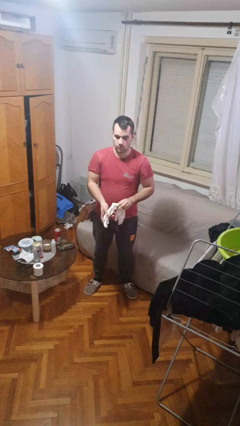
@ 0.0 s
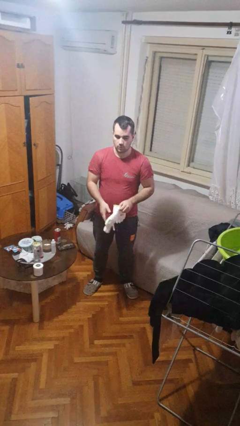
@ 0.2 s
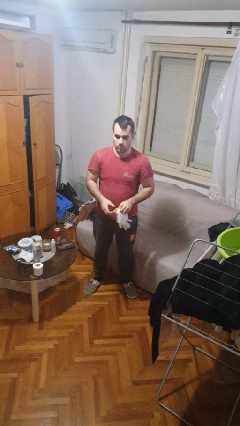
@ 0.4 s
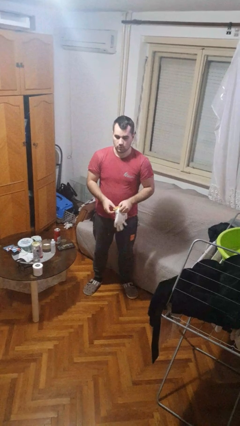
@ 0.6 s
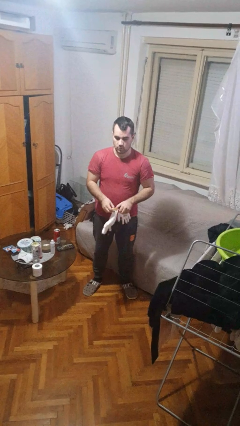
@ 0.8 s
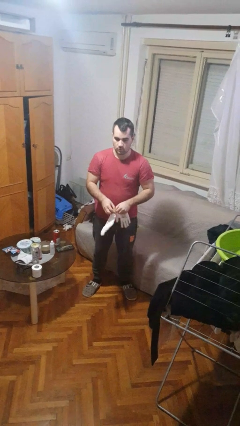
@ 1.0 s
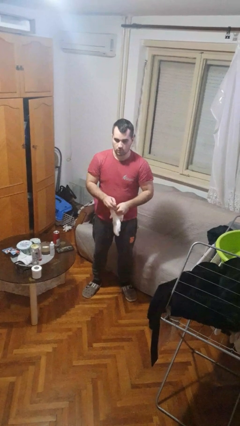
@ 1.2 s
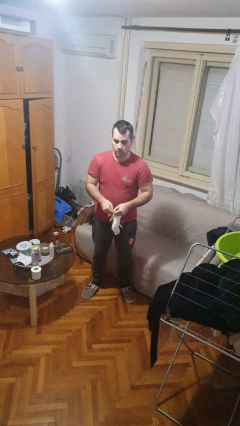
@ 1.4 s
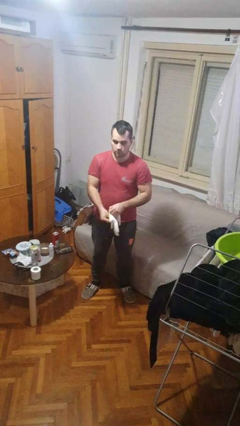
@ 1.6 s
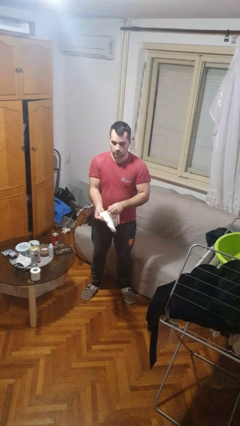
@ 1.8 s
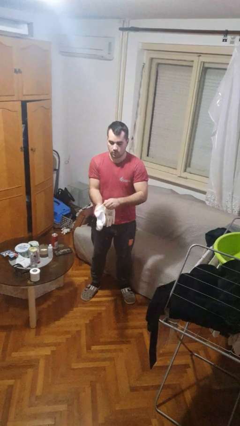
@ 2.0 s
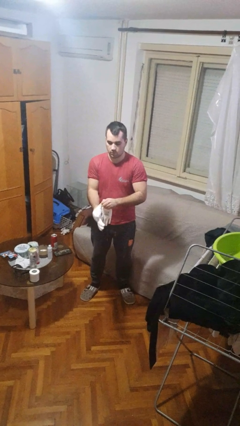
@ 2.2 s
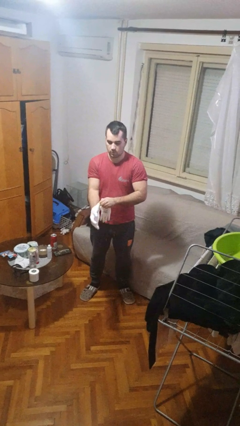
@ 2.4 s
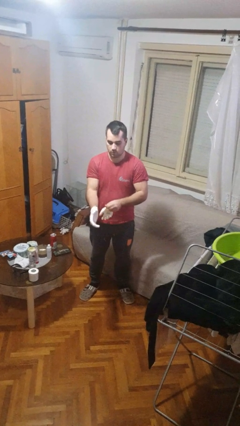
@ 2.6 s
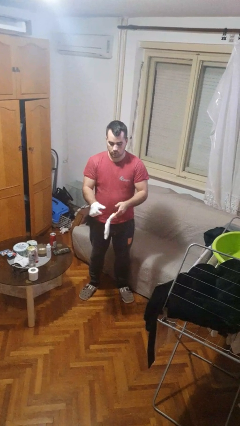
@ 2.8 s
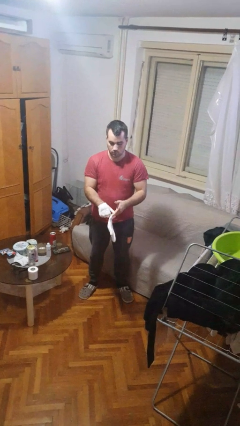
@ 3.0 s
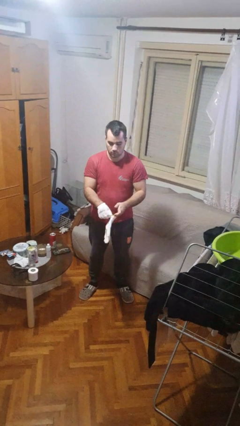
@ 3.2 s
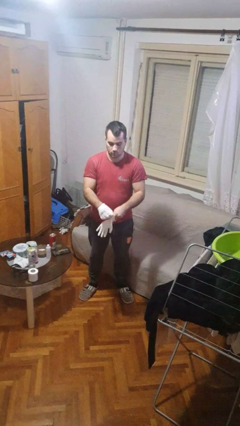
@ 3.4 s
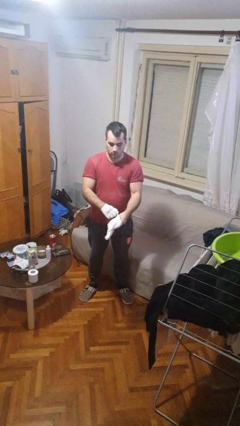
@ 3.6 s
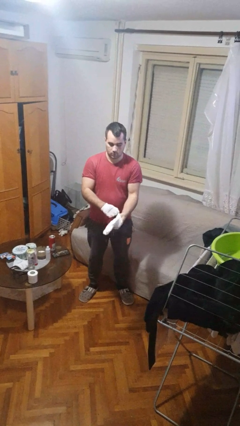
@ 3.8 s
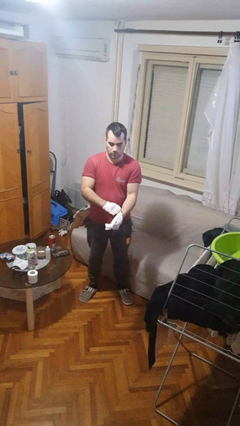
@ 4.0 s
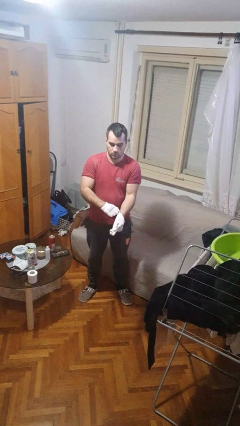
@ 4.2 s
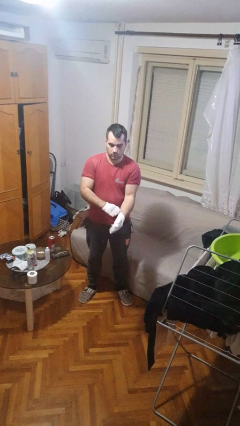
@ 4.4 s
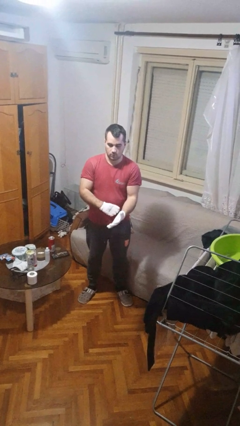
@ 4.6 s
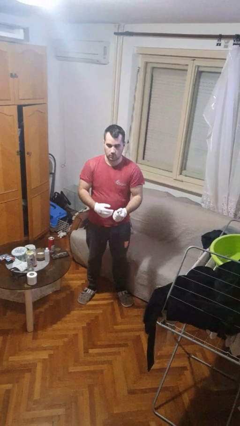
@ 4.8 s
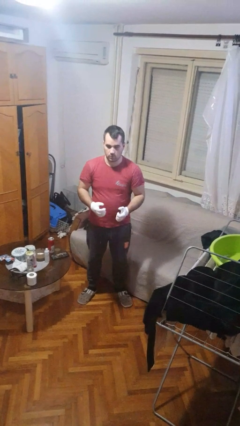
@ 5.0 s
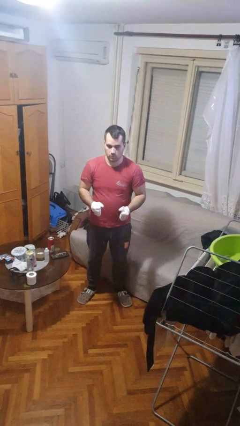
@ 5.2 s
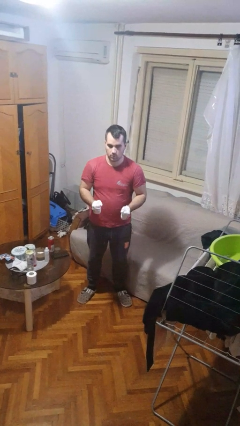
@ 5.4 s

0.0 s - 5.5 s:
person puts on gloves

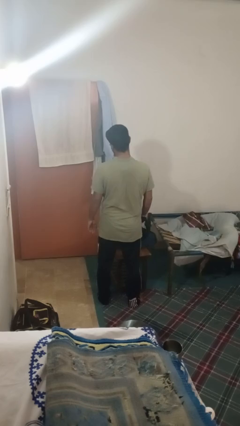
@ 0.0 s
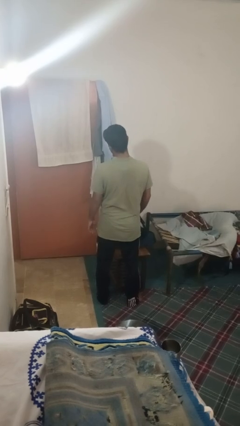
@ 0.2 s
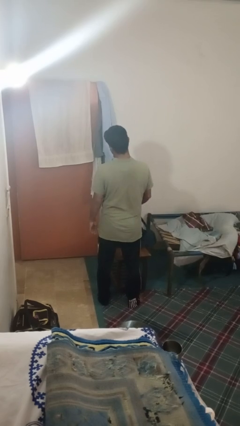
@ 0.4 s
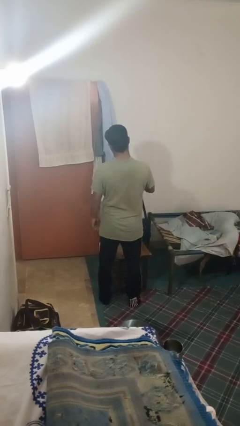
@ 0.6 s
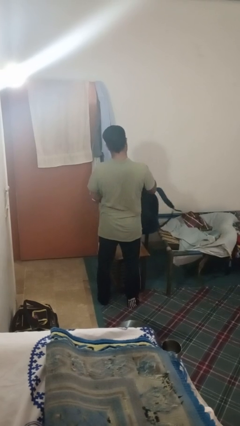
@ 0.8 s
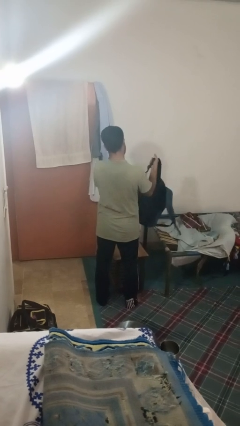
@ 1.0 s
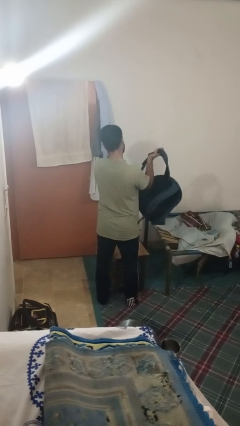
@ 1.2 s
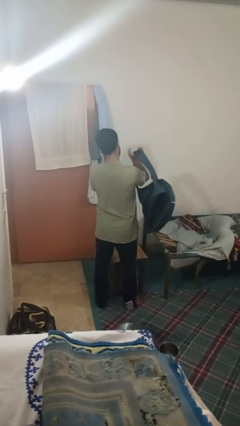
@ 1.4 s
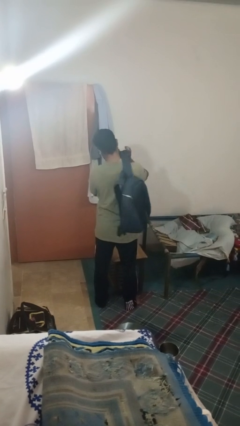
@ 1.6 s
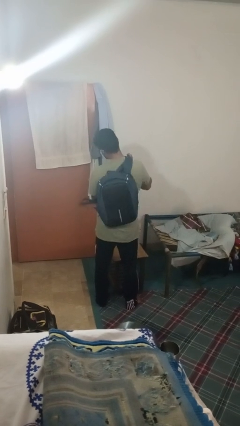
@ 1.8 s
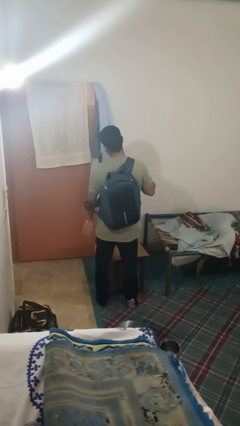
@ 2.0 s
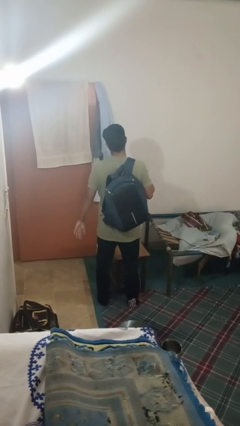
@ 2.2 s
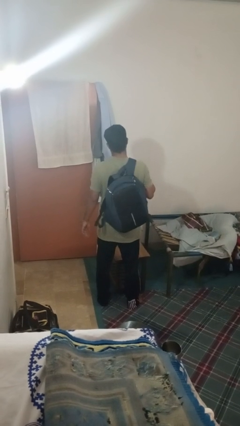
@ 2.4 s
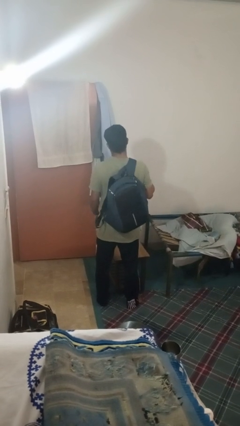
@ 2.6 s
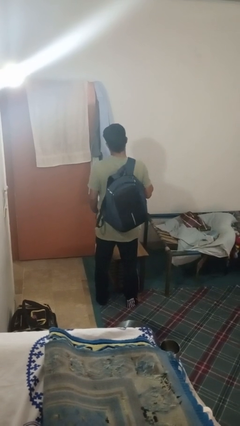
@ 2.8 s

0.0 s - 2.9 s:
person puts on backpack

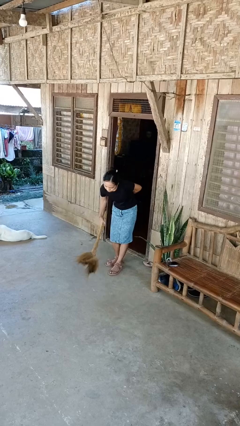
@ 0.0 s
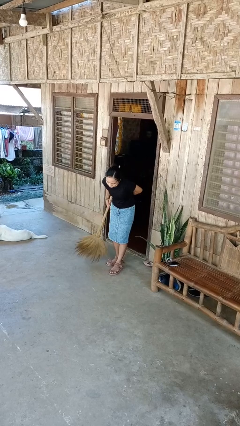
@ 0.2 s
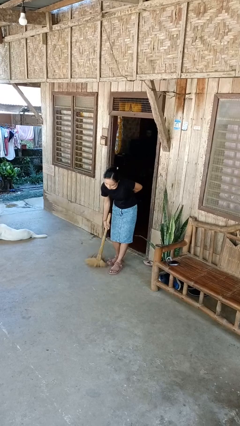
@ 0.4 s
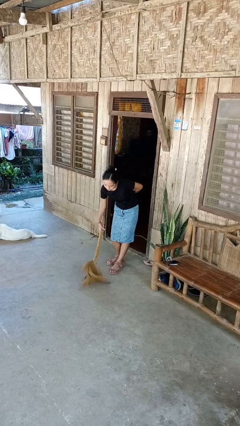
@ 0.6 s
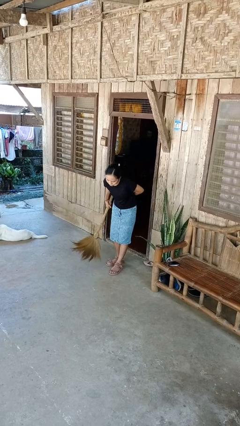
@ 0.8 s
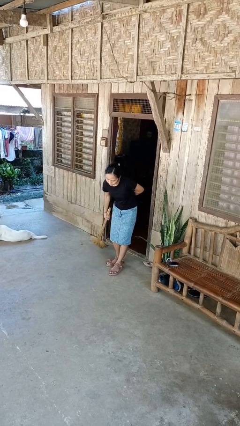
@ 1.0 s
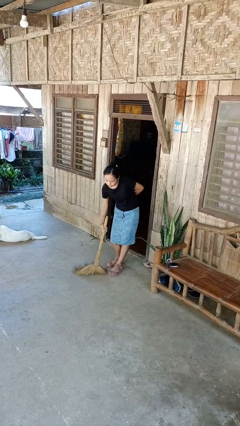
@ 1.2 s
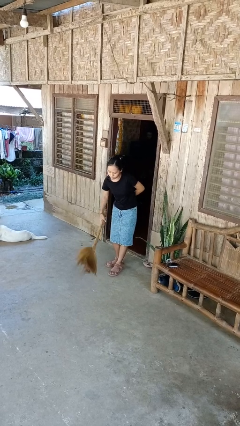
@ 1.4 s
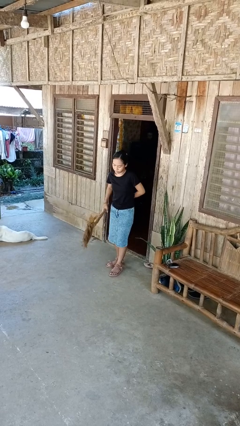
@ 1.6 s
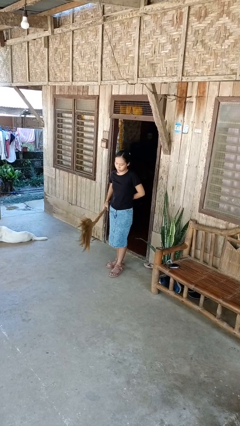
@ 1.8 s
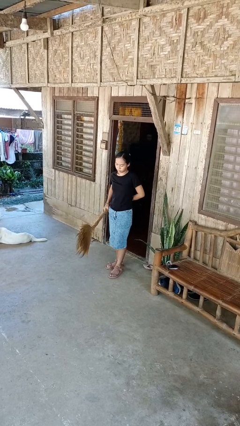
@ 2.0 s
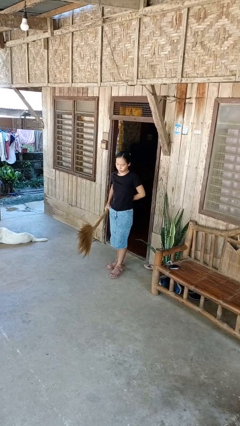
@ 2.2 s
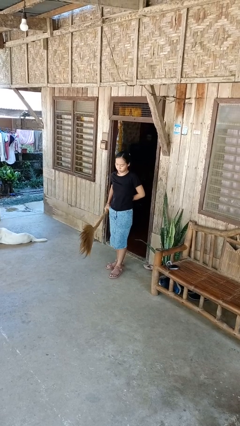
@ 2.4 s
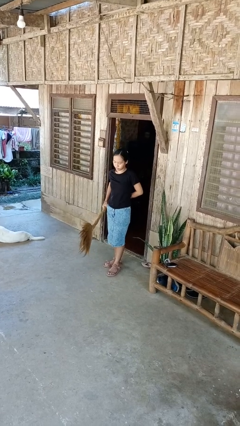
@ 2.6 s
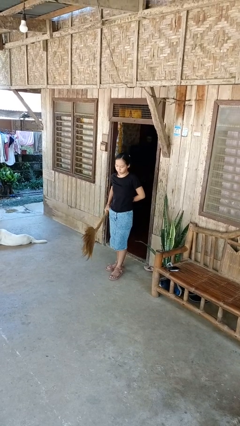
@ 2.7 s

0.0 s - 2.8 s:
person sweeps floor

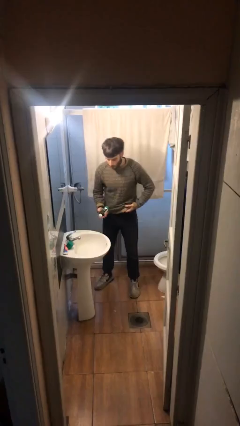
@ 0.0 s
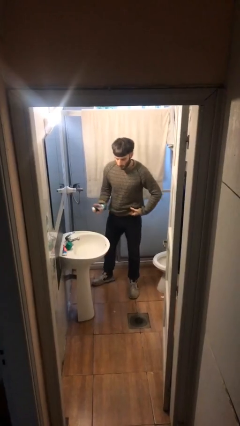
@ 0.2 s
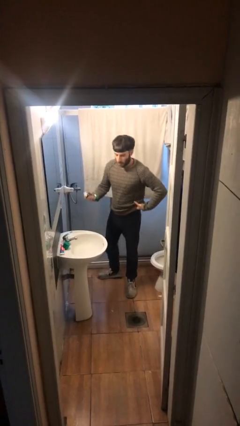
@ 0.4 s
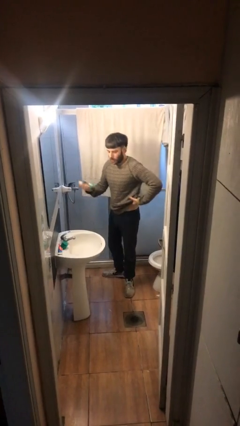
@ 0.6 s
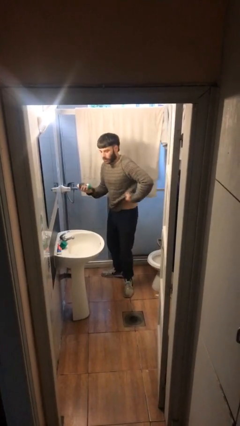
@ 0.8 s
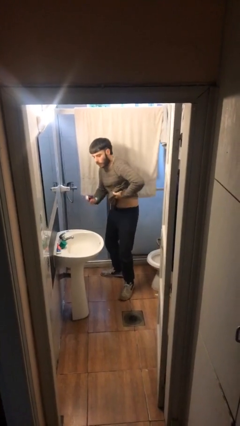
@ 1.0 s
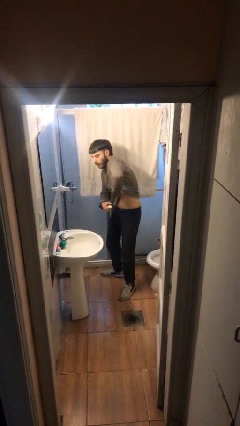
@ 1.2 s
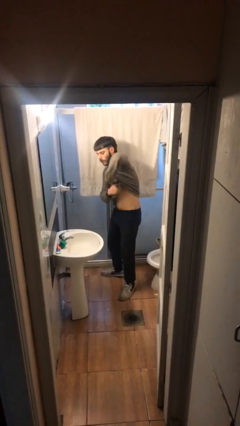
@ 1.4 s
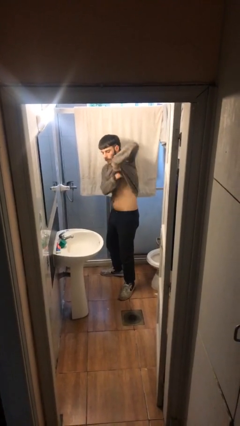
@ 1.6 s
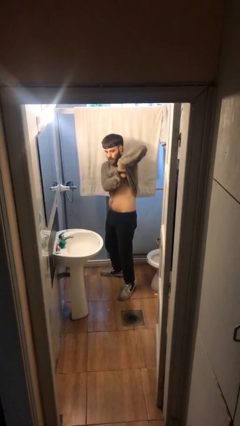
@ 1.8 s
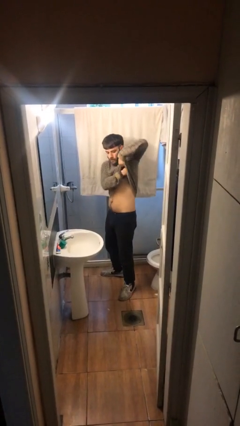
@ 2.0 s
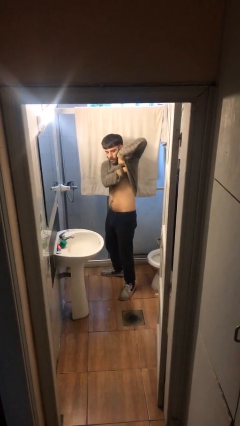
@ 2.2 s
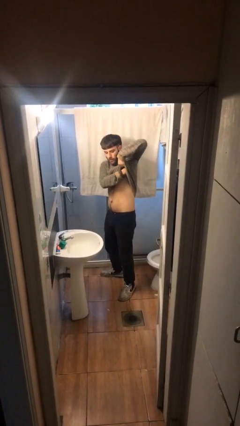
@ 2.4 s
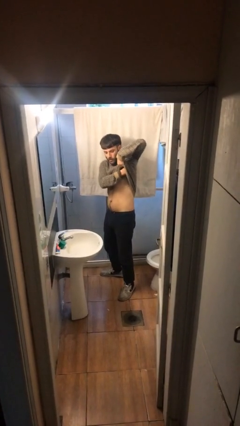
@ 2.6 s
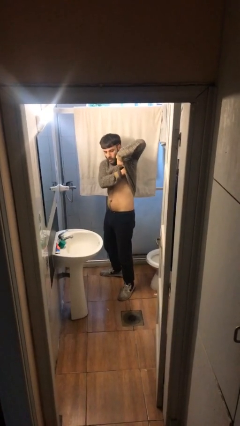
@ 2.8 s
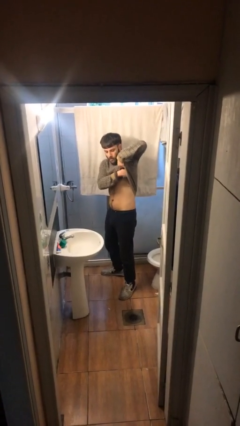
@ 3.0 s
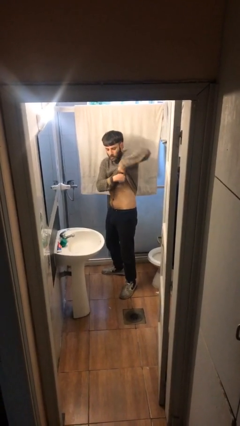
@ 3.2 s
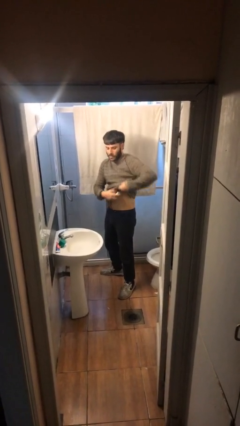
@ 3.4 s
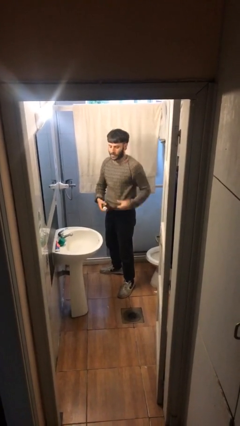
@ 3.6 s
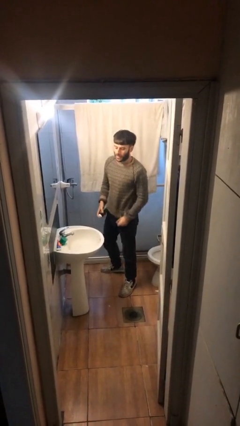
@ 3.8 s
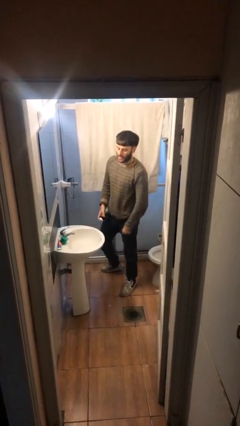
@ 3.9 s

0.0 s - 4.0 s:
person applies deodorant

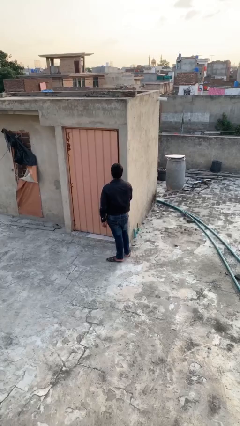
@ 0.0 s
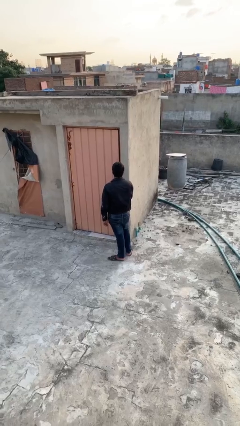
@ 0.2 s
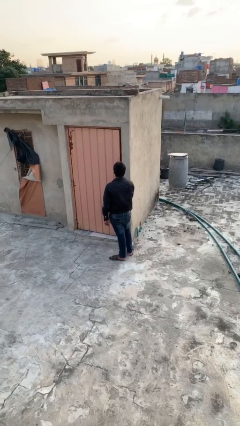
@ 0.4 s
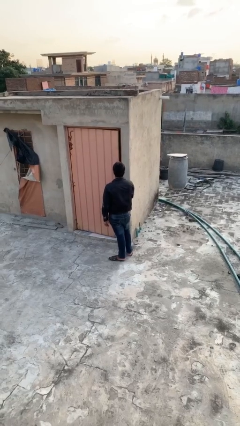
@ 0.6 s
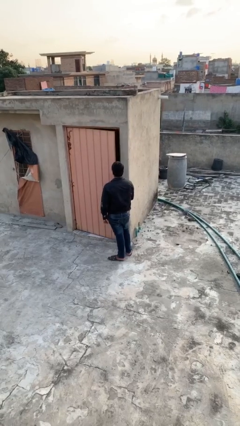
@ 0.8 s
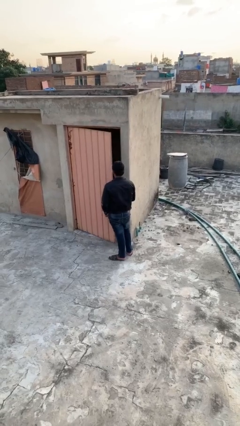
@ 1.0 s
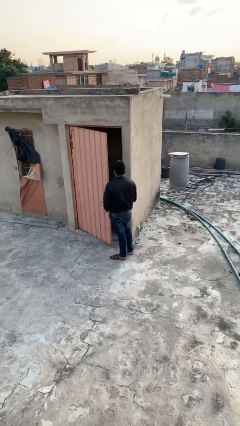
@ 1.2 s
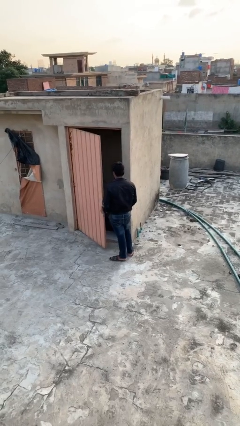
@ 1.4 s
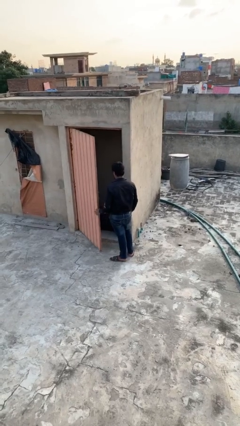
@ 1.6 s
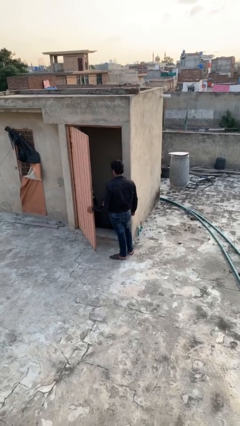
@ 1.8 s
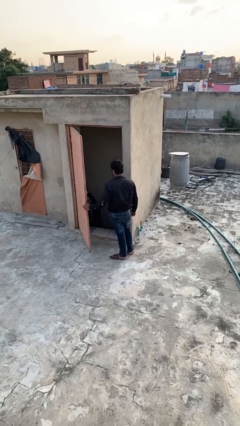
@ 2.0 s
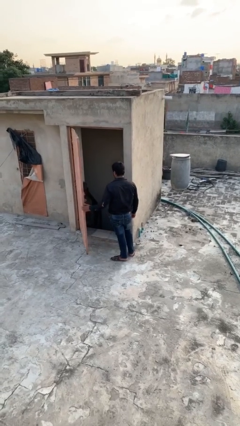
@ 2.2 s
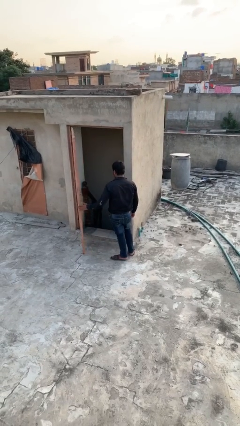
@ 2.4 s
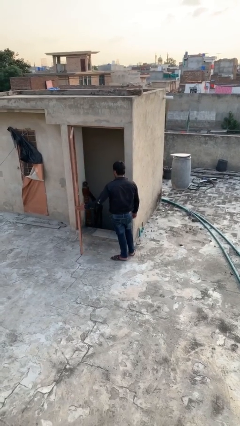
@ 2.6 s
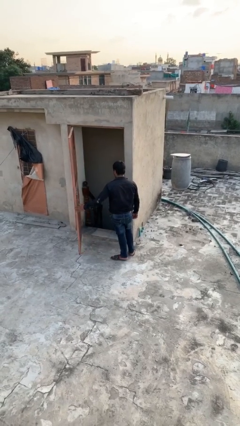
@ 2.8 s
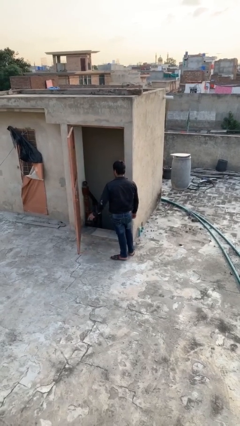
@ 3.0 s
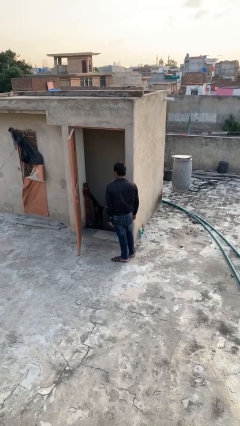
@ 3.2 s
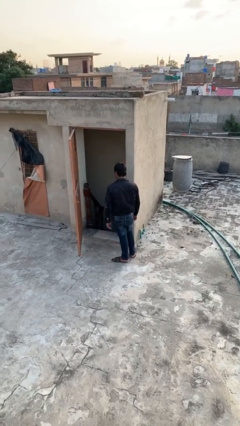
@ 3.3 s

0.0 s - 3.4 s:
person opens facility door
